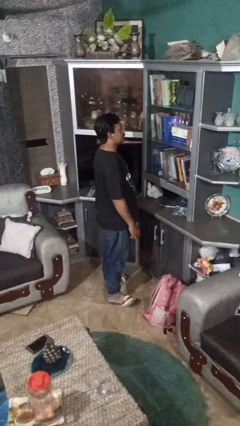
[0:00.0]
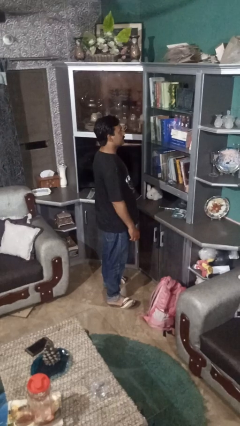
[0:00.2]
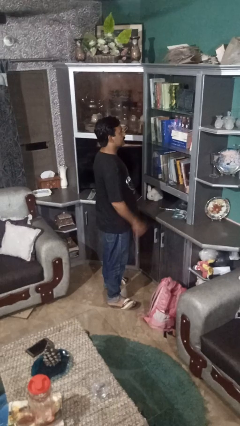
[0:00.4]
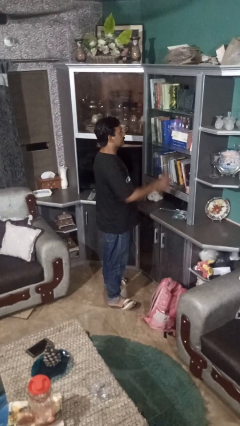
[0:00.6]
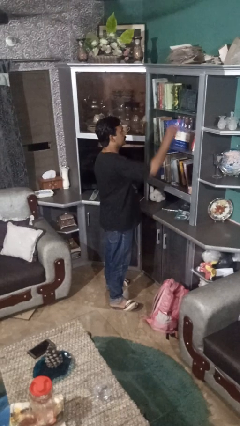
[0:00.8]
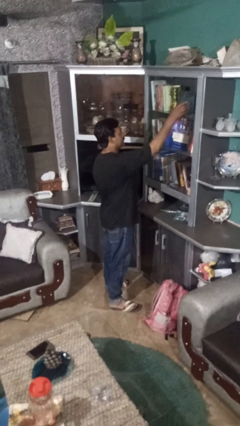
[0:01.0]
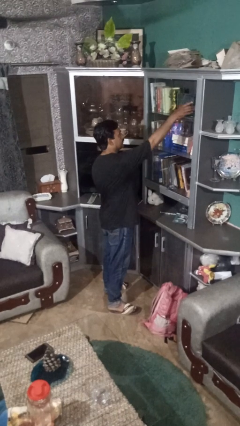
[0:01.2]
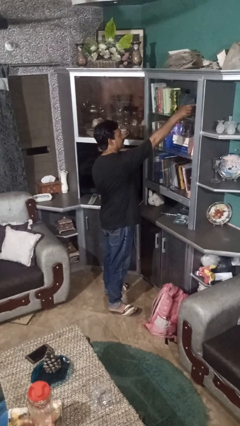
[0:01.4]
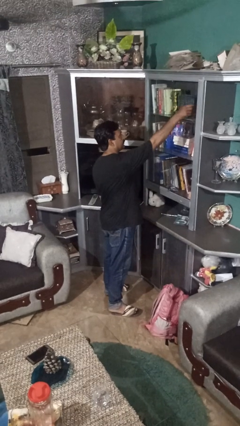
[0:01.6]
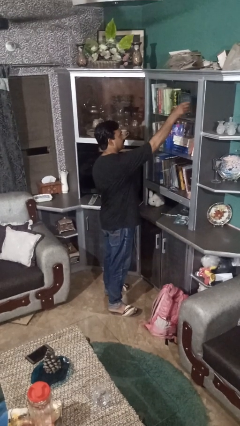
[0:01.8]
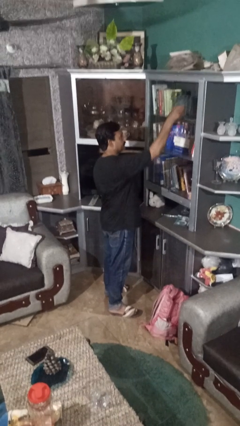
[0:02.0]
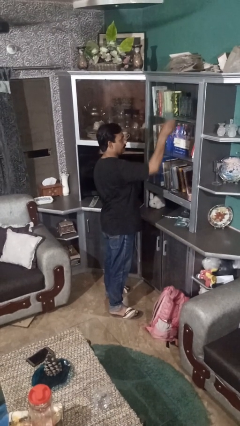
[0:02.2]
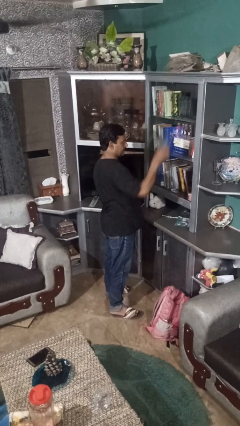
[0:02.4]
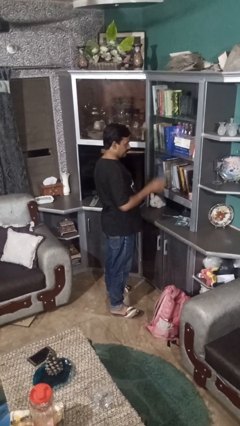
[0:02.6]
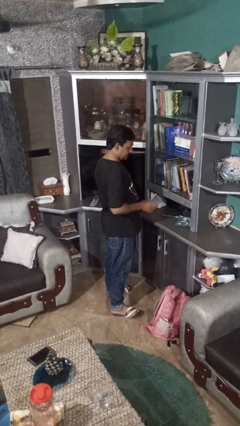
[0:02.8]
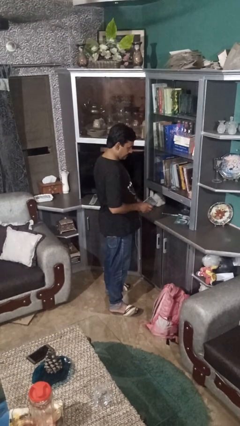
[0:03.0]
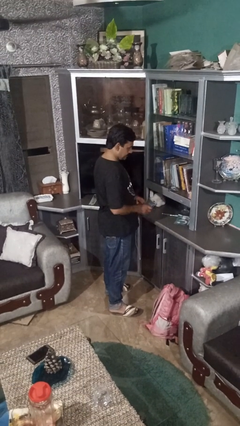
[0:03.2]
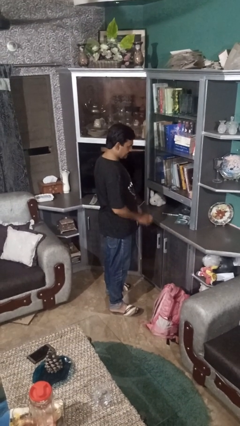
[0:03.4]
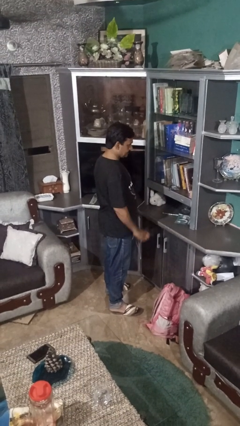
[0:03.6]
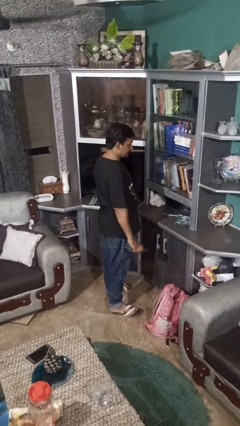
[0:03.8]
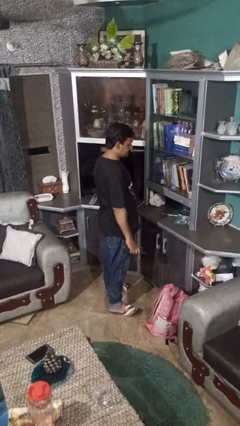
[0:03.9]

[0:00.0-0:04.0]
person picks up object from shelf

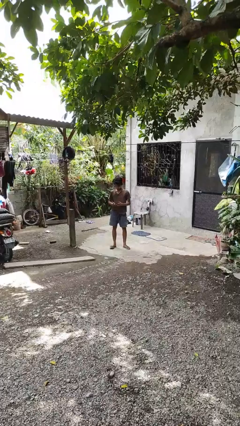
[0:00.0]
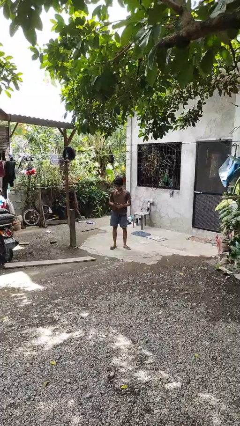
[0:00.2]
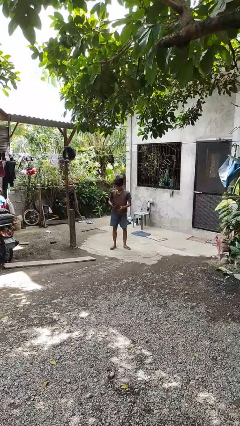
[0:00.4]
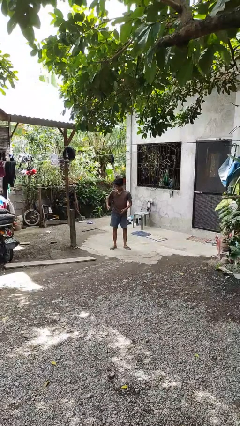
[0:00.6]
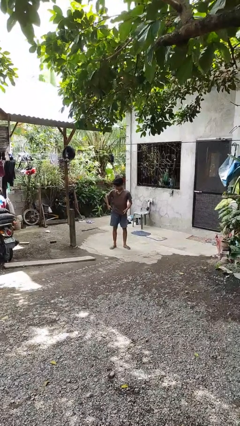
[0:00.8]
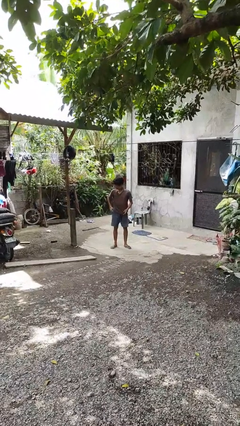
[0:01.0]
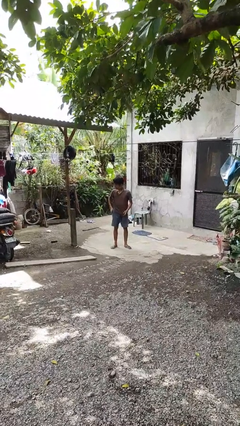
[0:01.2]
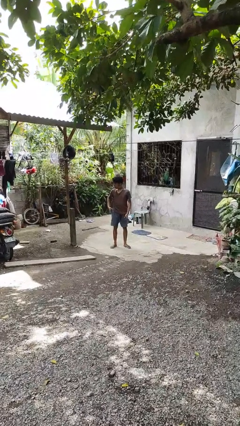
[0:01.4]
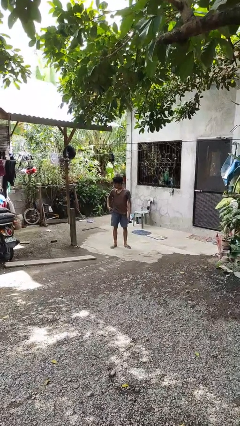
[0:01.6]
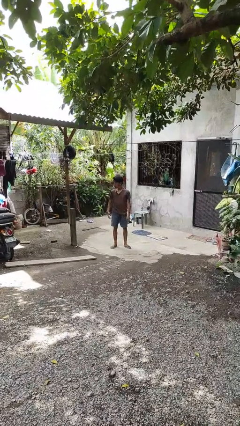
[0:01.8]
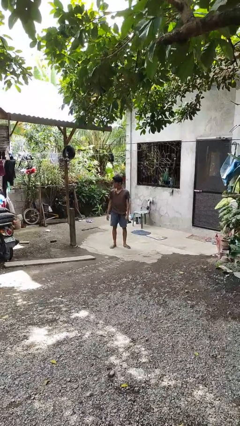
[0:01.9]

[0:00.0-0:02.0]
person puts phone into pocket

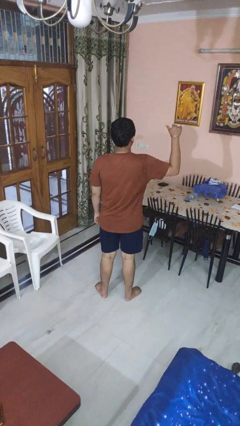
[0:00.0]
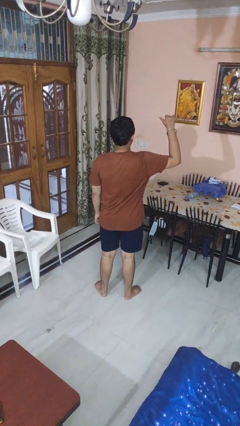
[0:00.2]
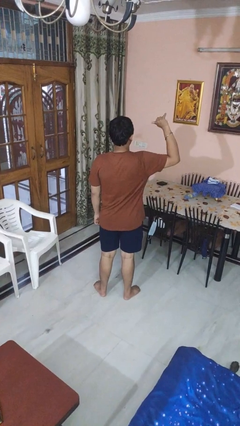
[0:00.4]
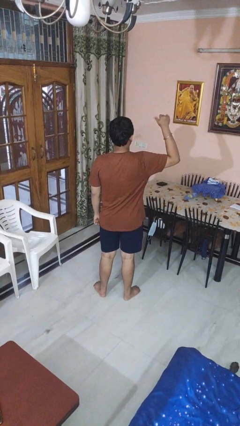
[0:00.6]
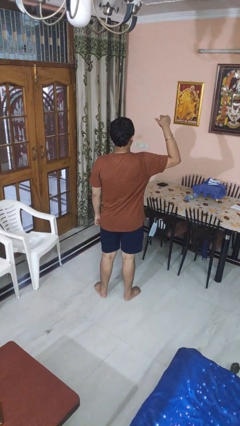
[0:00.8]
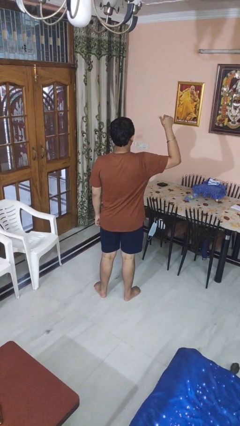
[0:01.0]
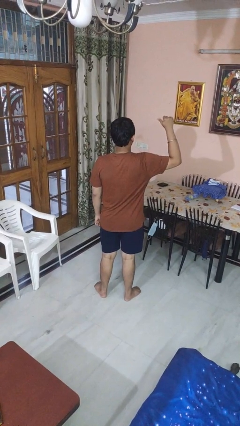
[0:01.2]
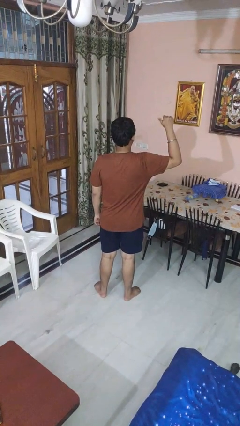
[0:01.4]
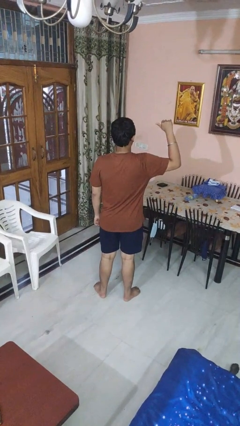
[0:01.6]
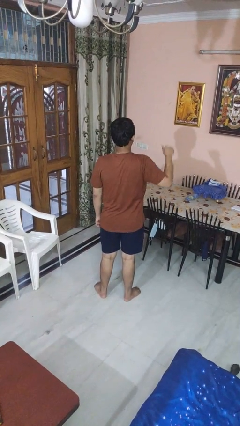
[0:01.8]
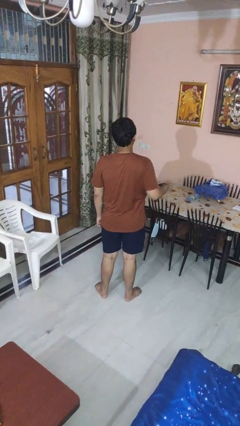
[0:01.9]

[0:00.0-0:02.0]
person gestures hang loose

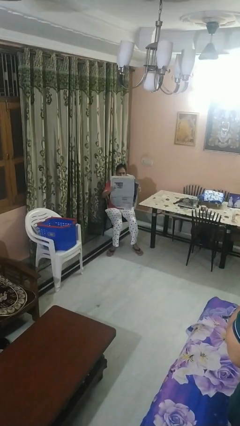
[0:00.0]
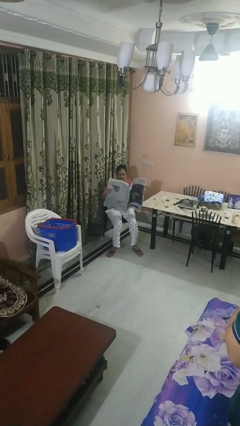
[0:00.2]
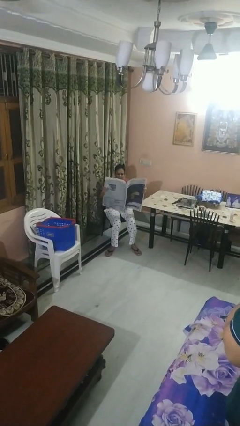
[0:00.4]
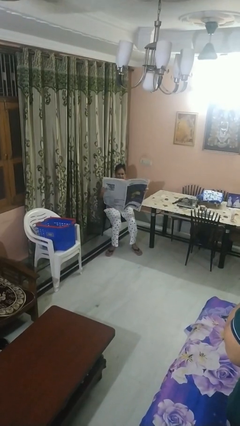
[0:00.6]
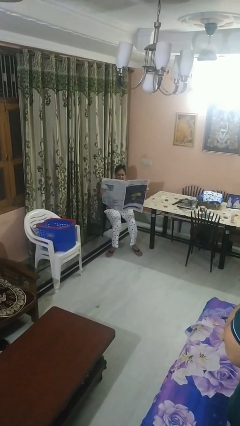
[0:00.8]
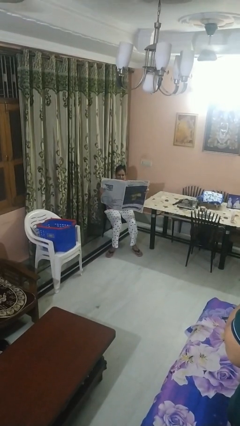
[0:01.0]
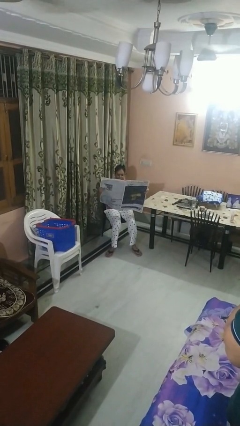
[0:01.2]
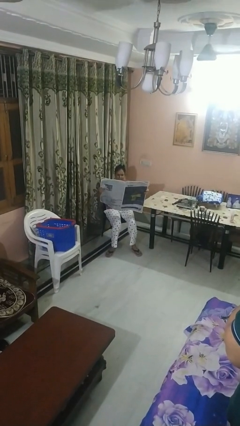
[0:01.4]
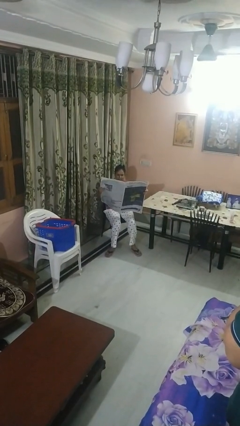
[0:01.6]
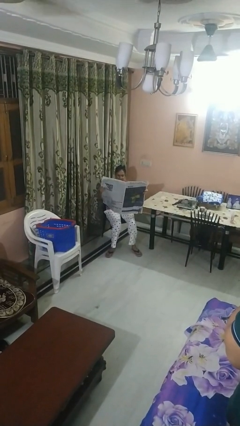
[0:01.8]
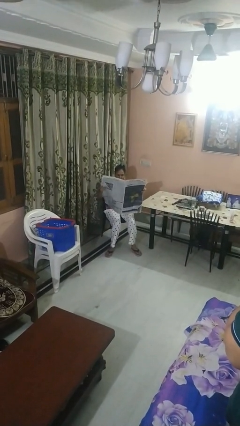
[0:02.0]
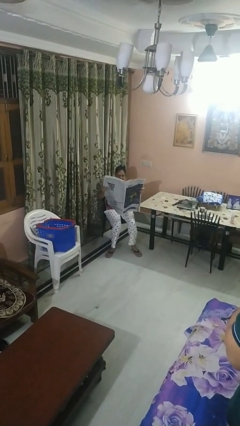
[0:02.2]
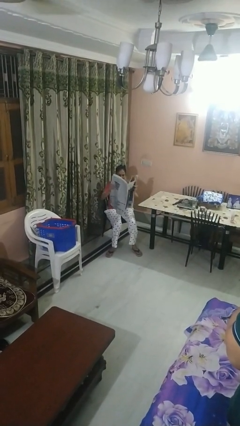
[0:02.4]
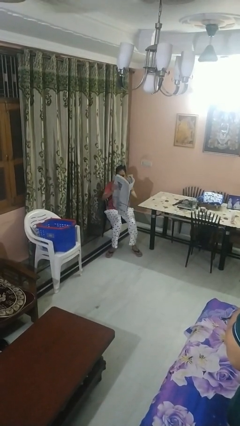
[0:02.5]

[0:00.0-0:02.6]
person reads newspaper

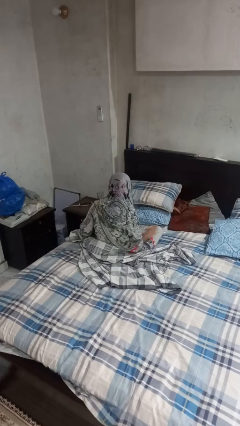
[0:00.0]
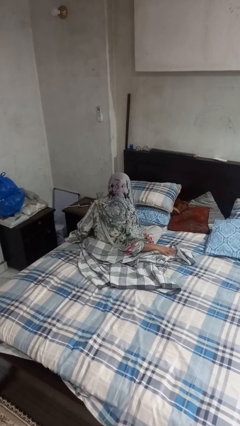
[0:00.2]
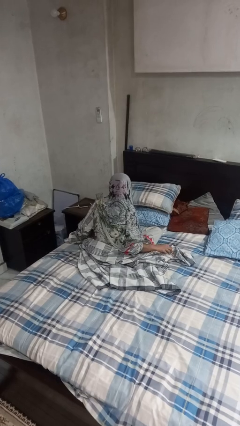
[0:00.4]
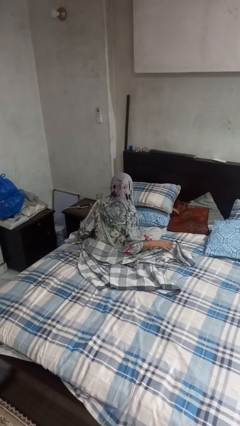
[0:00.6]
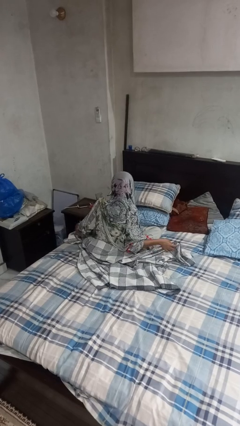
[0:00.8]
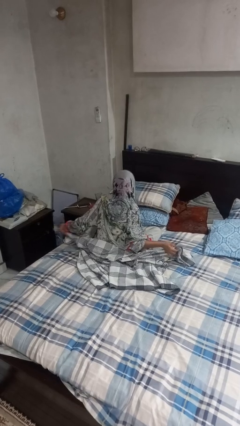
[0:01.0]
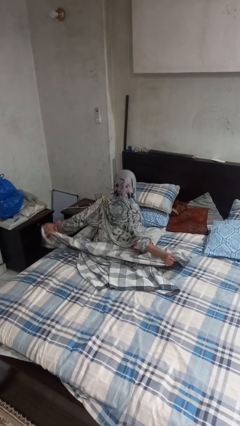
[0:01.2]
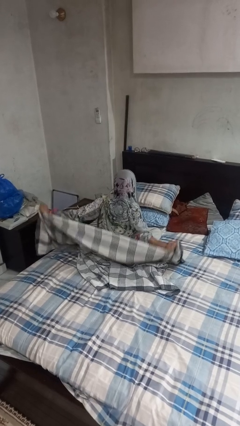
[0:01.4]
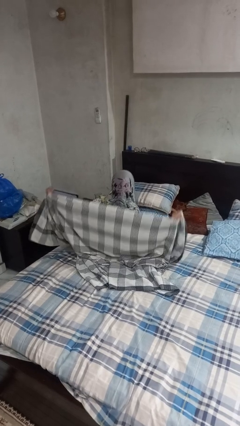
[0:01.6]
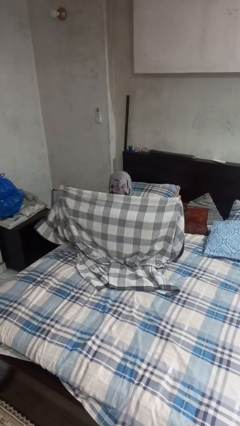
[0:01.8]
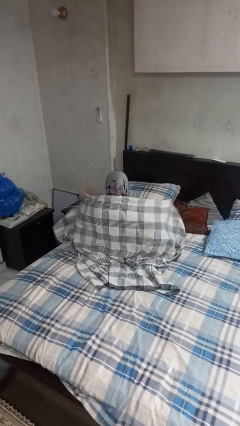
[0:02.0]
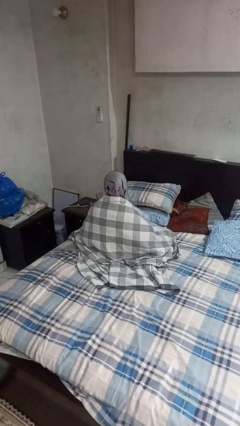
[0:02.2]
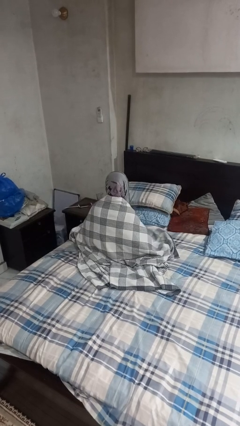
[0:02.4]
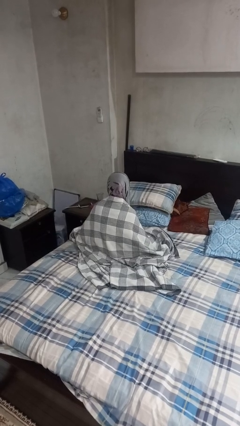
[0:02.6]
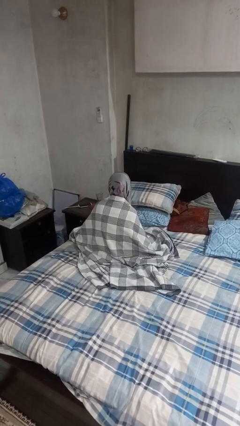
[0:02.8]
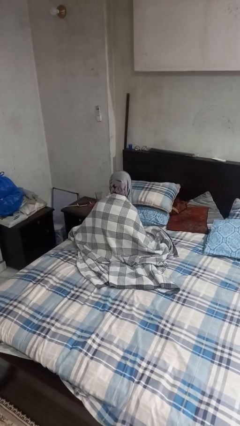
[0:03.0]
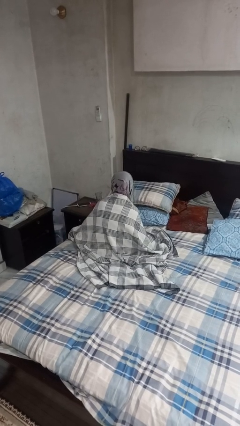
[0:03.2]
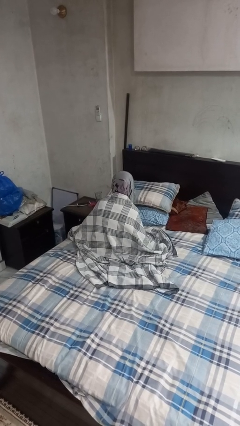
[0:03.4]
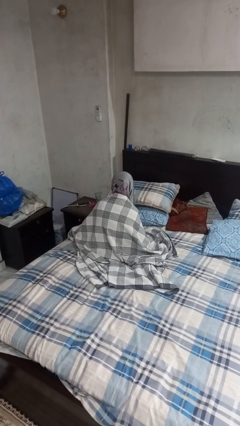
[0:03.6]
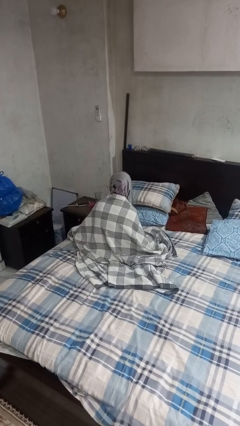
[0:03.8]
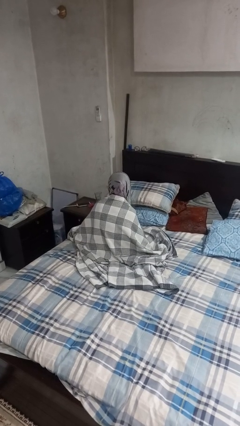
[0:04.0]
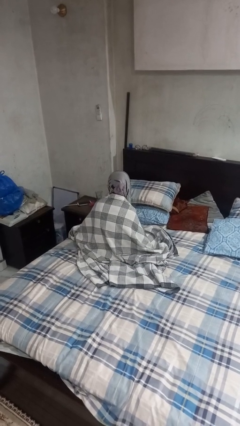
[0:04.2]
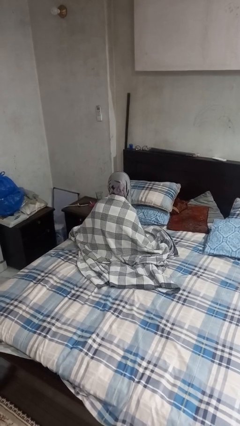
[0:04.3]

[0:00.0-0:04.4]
person covers with blanket

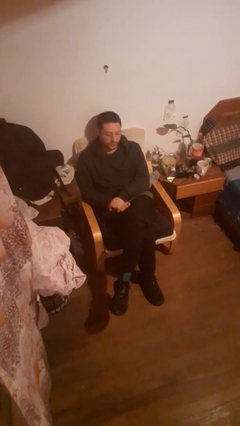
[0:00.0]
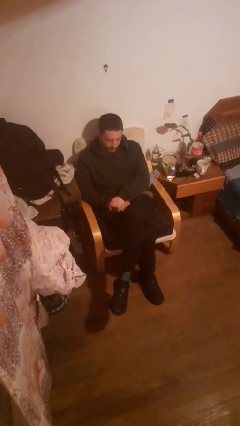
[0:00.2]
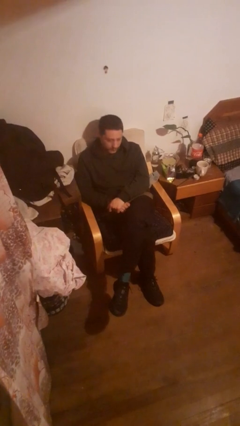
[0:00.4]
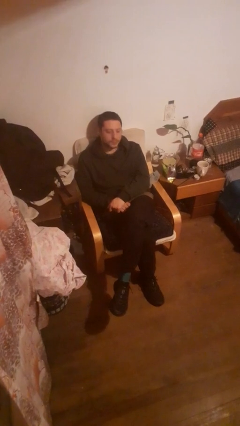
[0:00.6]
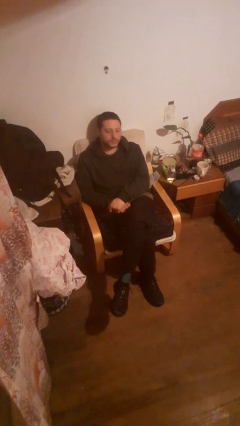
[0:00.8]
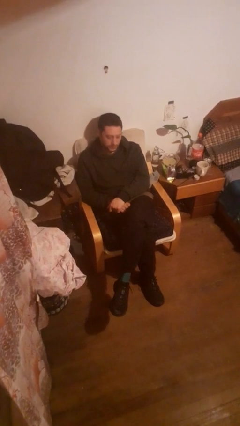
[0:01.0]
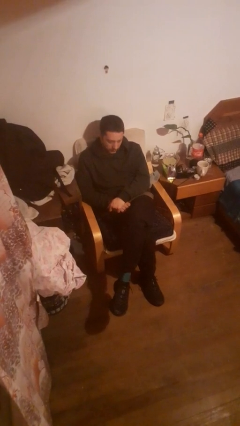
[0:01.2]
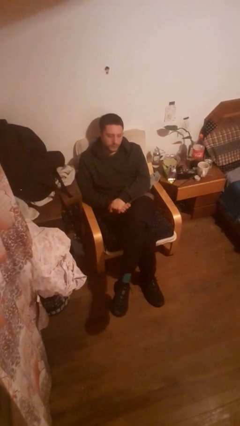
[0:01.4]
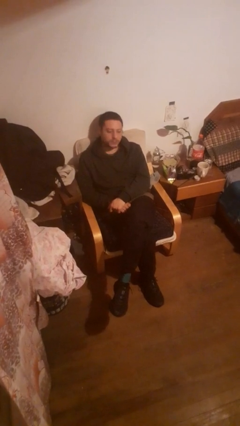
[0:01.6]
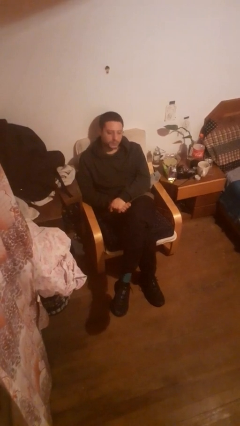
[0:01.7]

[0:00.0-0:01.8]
person nods head

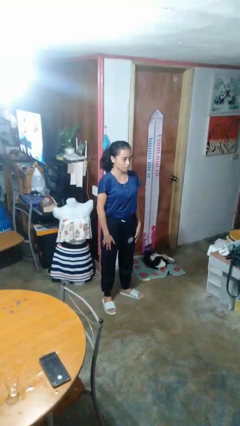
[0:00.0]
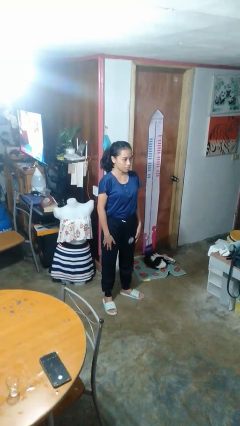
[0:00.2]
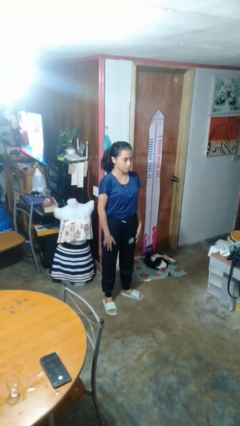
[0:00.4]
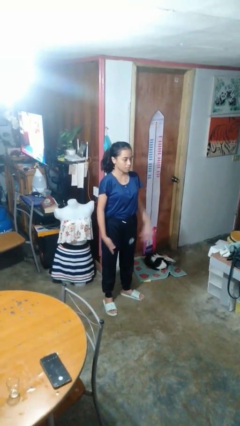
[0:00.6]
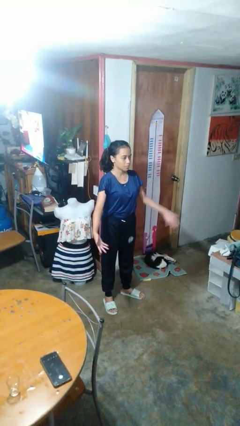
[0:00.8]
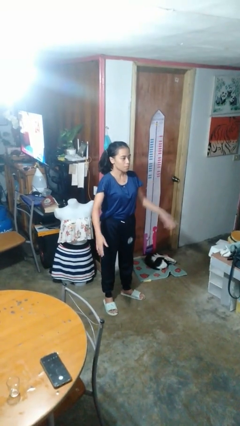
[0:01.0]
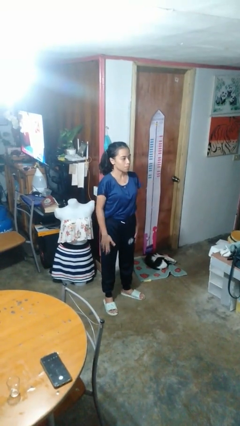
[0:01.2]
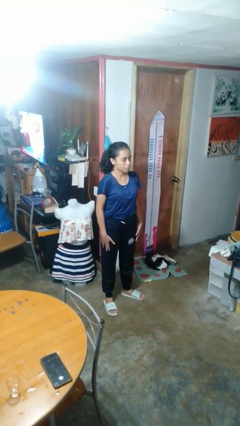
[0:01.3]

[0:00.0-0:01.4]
person slaps hands on thighs
